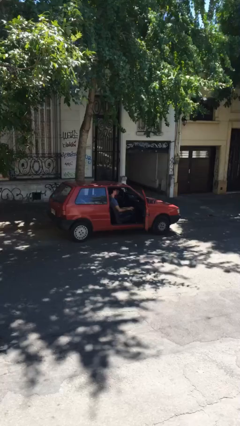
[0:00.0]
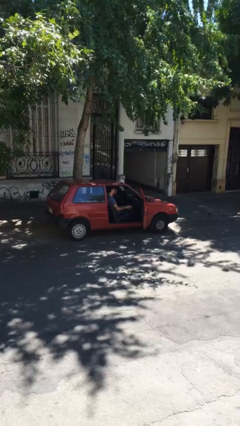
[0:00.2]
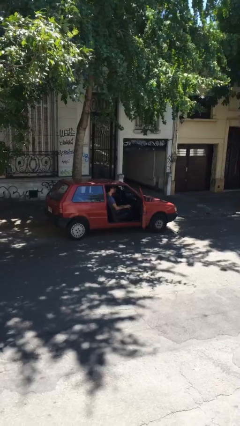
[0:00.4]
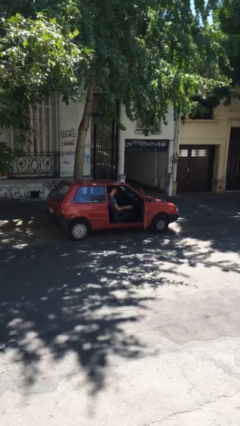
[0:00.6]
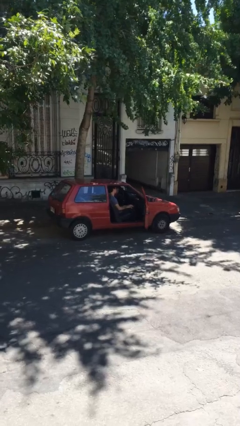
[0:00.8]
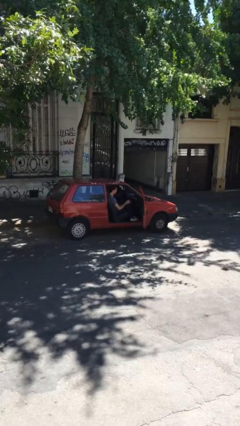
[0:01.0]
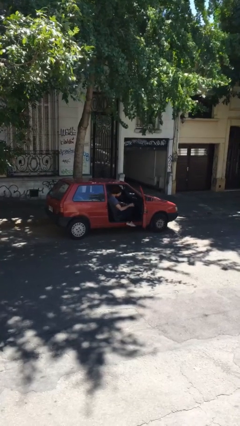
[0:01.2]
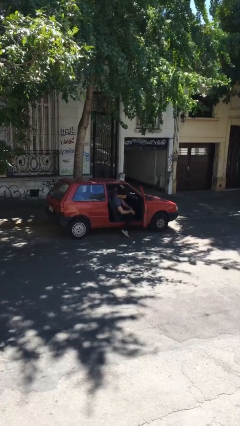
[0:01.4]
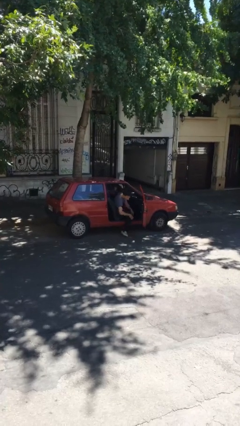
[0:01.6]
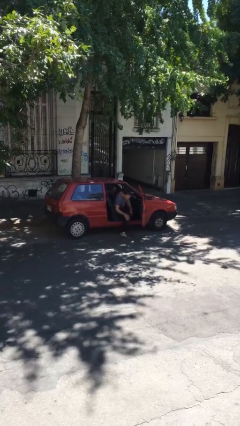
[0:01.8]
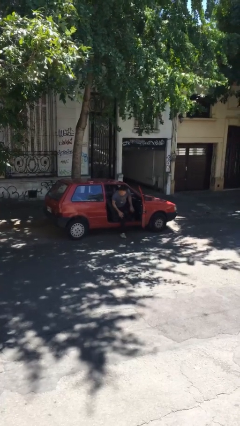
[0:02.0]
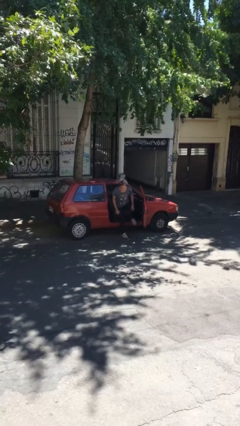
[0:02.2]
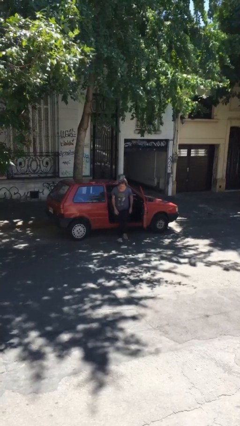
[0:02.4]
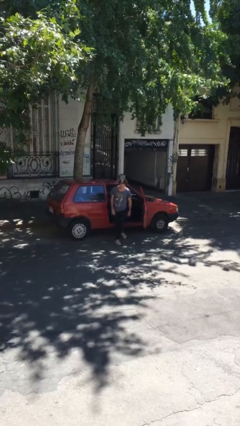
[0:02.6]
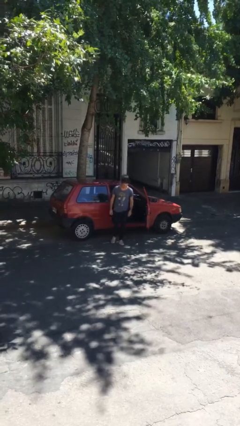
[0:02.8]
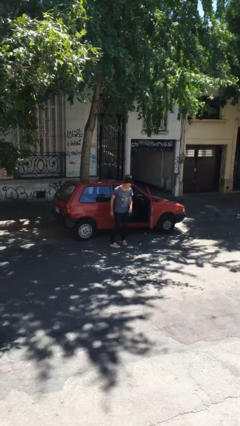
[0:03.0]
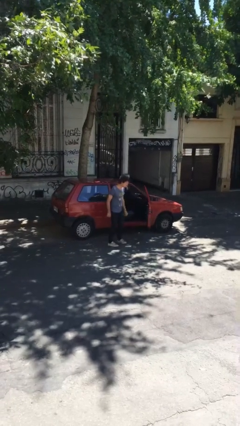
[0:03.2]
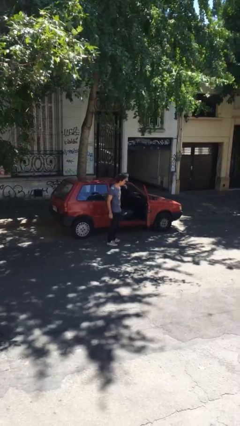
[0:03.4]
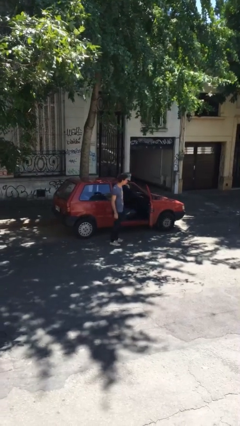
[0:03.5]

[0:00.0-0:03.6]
person exits car

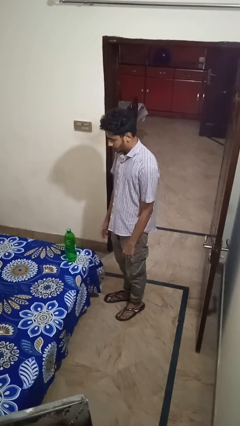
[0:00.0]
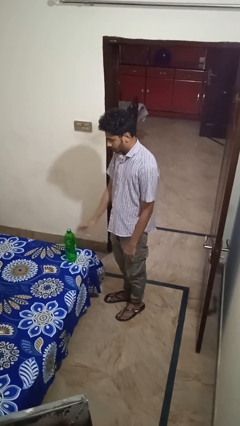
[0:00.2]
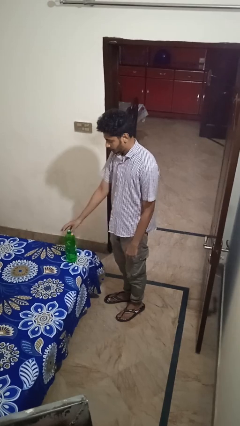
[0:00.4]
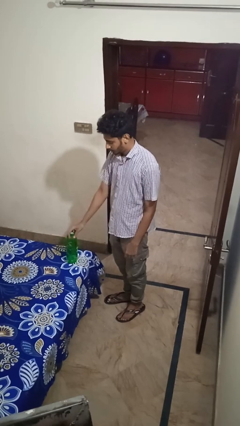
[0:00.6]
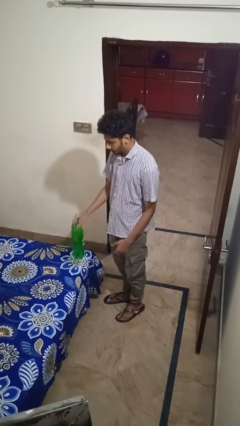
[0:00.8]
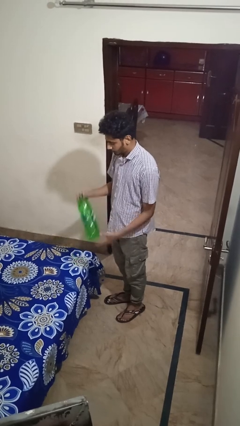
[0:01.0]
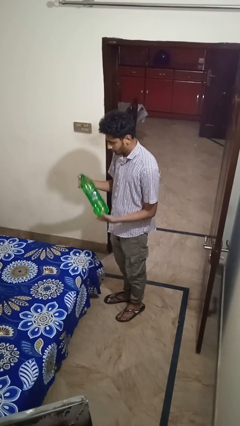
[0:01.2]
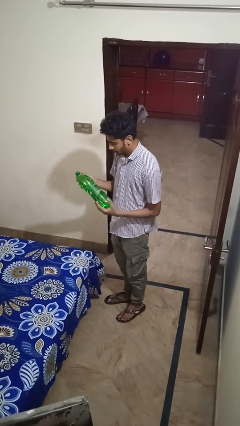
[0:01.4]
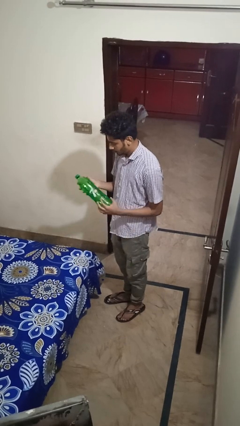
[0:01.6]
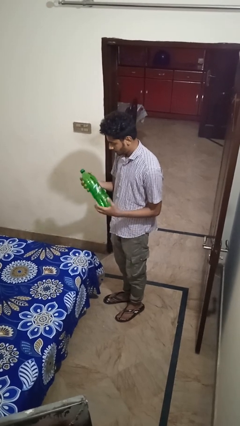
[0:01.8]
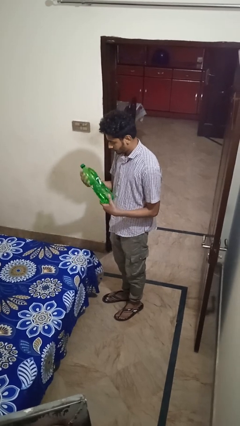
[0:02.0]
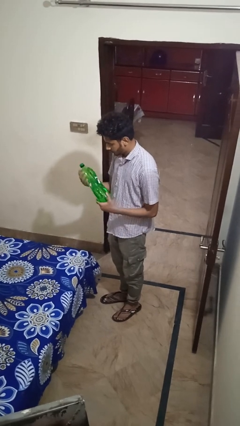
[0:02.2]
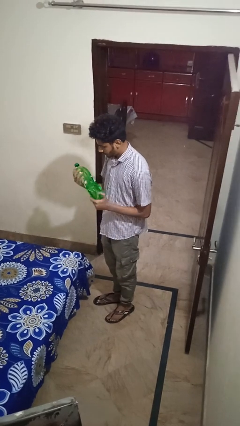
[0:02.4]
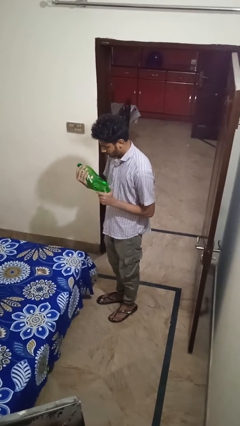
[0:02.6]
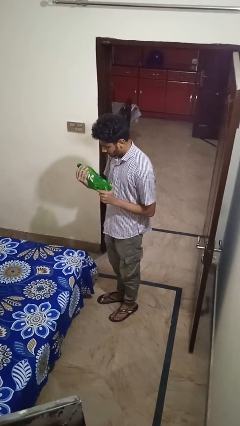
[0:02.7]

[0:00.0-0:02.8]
person picks up object from bed

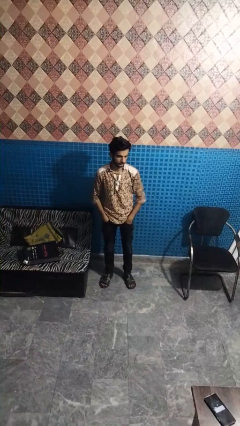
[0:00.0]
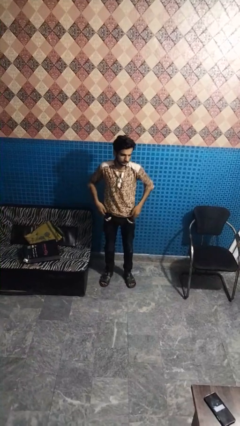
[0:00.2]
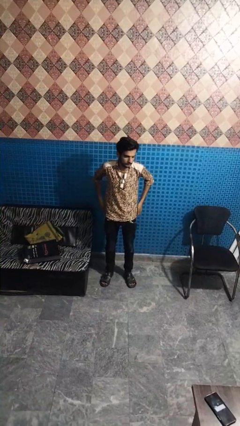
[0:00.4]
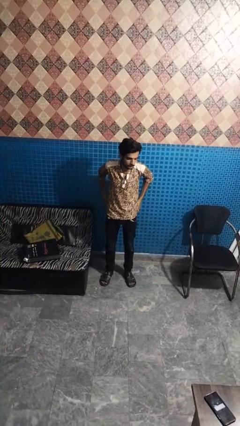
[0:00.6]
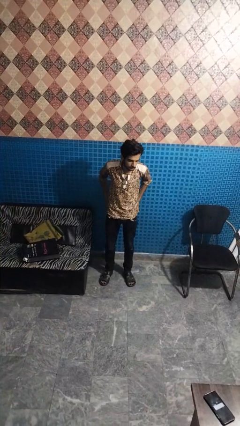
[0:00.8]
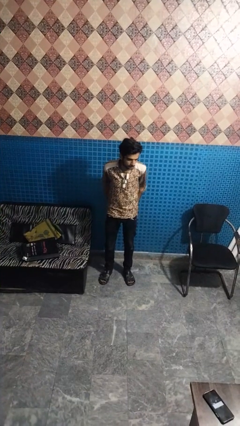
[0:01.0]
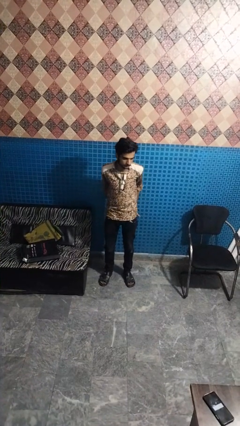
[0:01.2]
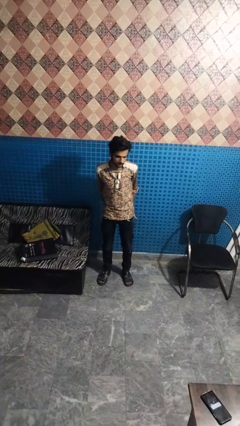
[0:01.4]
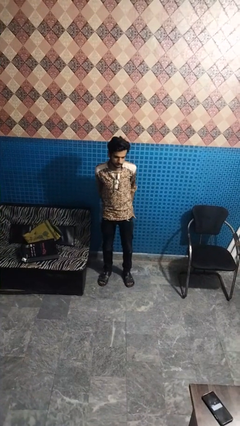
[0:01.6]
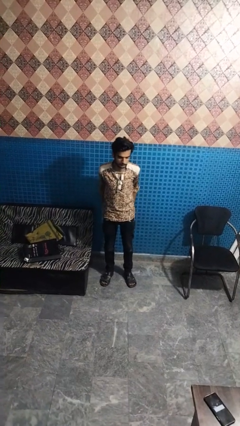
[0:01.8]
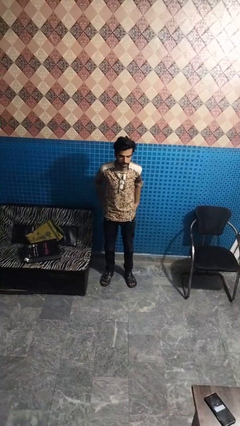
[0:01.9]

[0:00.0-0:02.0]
person puts hands in back pockets

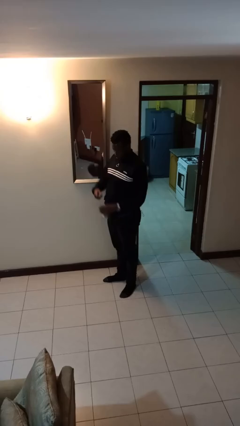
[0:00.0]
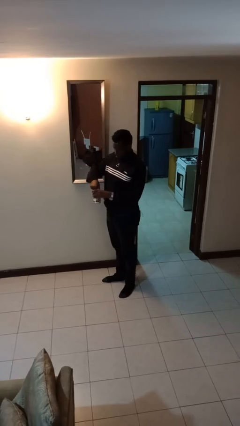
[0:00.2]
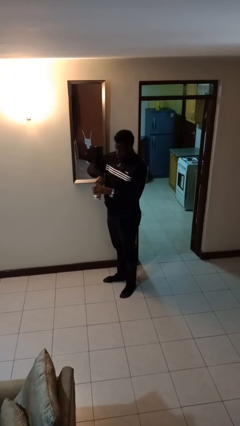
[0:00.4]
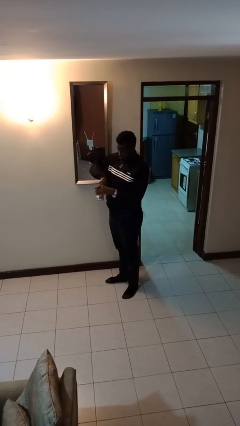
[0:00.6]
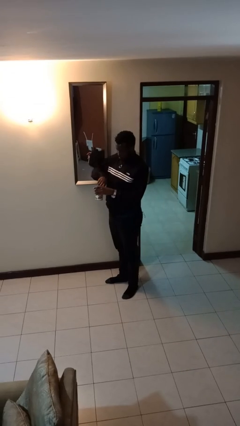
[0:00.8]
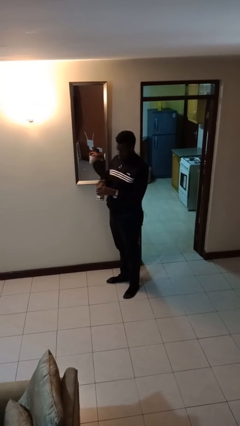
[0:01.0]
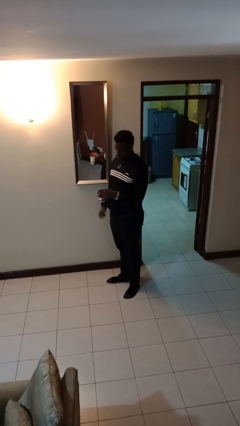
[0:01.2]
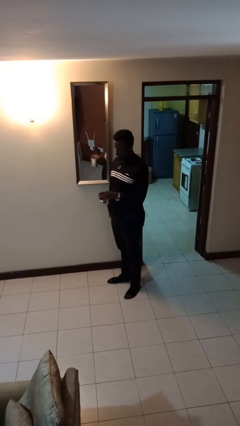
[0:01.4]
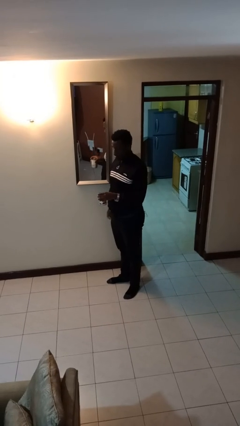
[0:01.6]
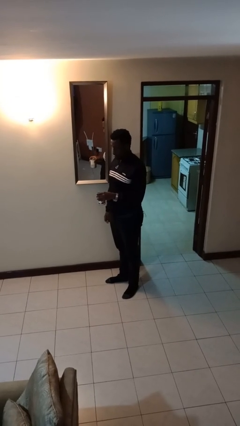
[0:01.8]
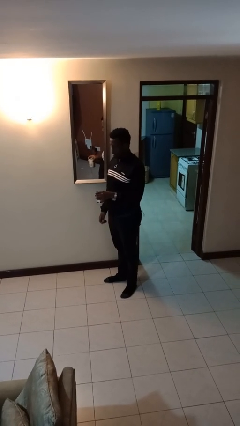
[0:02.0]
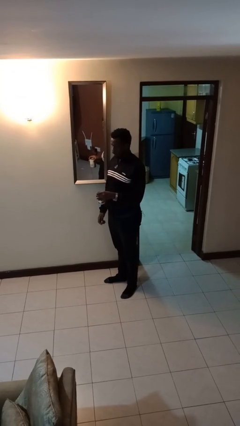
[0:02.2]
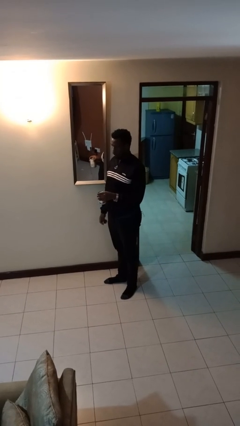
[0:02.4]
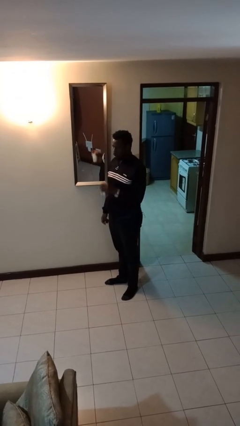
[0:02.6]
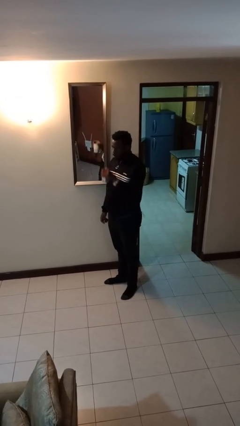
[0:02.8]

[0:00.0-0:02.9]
person opens beverage can

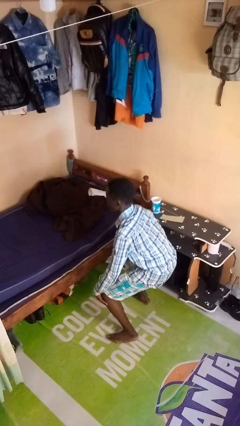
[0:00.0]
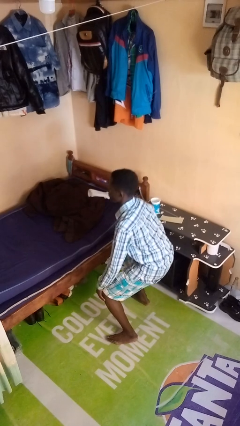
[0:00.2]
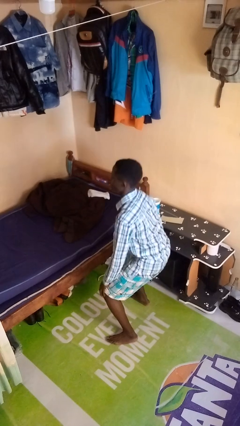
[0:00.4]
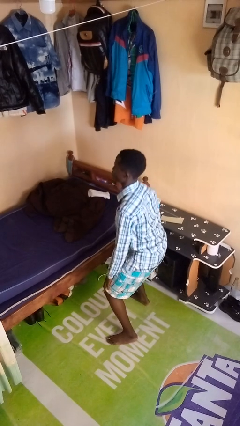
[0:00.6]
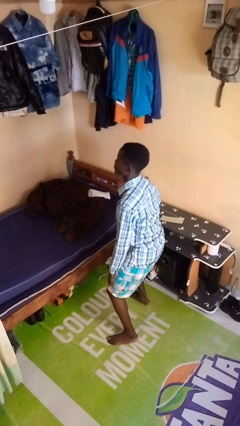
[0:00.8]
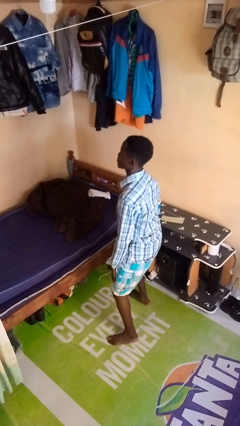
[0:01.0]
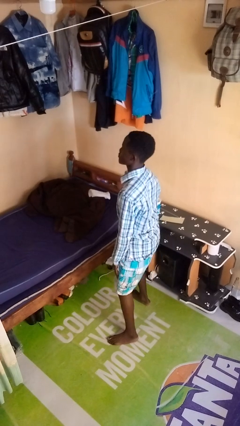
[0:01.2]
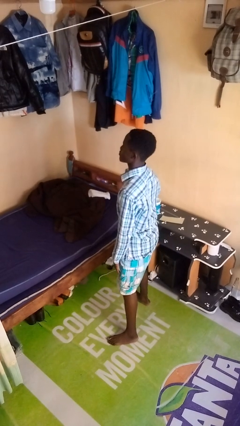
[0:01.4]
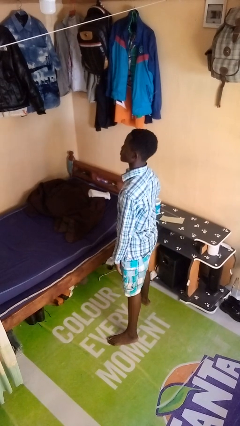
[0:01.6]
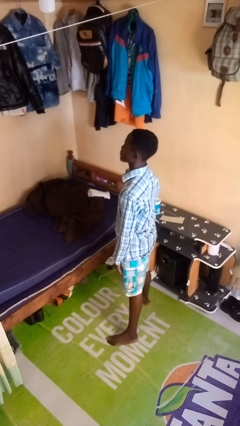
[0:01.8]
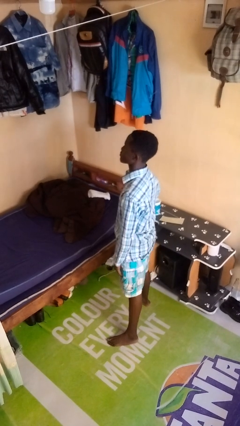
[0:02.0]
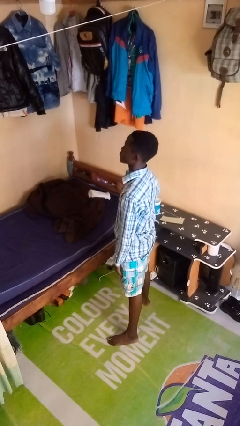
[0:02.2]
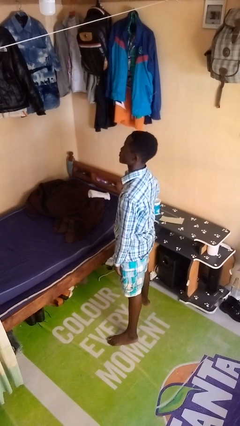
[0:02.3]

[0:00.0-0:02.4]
person stands up

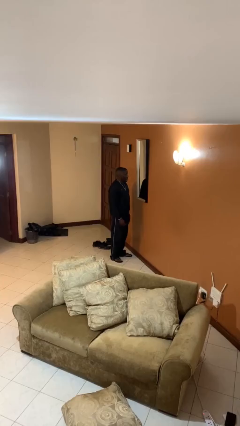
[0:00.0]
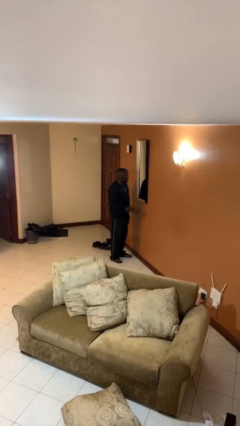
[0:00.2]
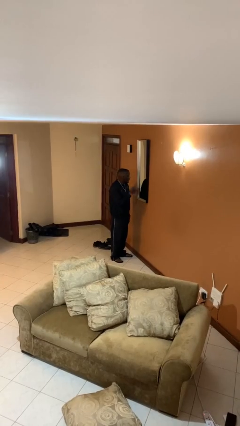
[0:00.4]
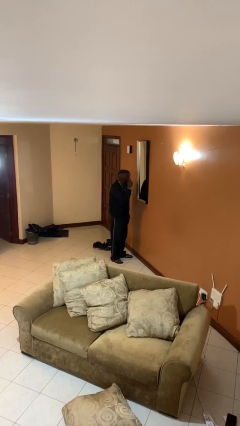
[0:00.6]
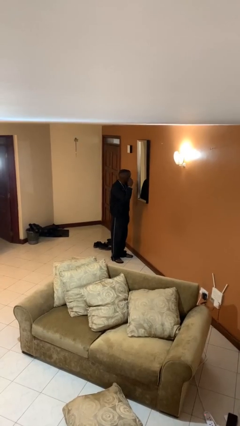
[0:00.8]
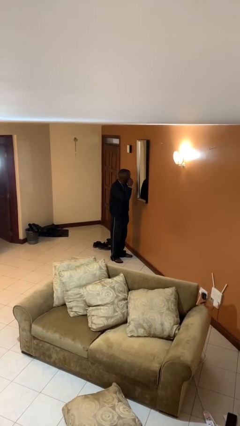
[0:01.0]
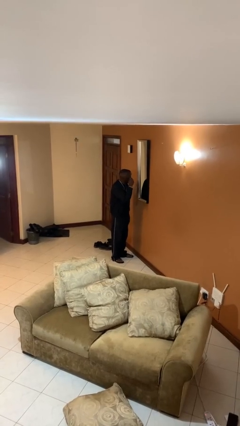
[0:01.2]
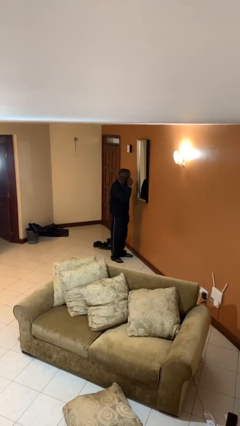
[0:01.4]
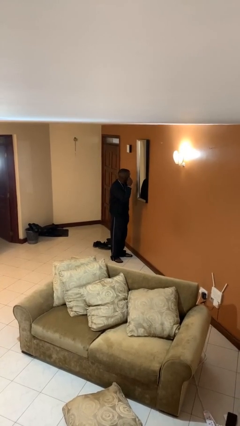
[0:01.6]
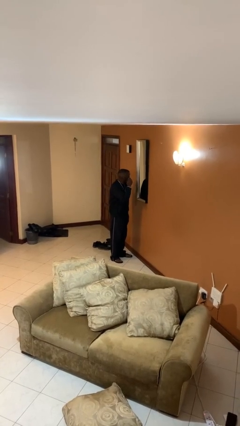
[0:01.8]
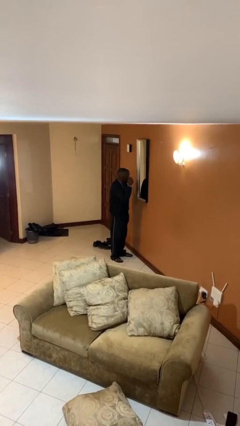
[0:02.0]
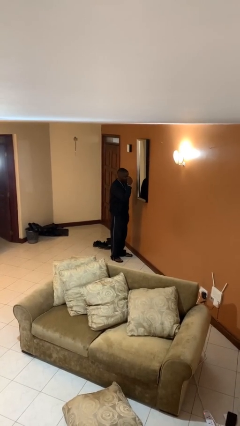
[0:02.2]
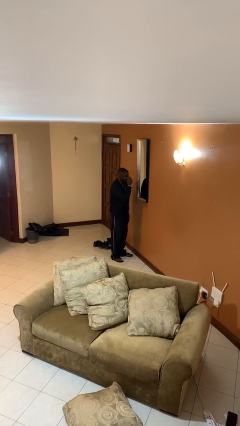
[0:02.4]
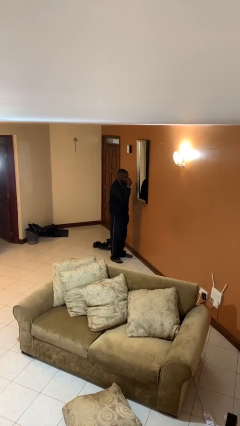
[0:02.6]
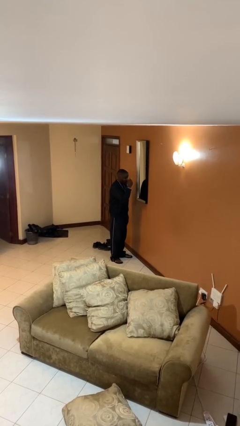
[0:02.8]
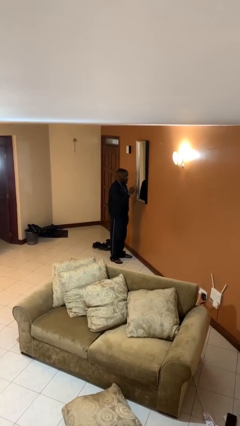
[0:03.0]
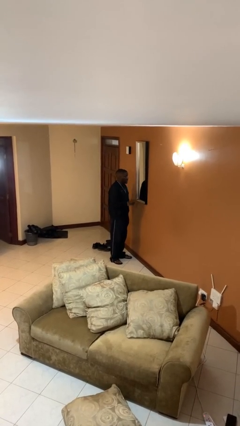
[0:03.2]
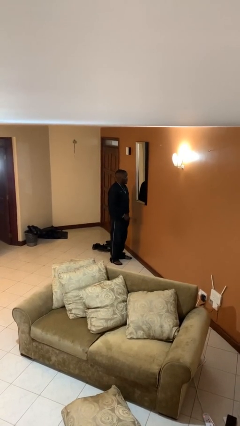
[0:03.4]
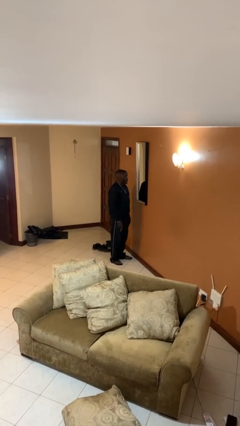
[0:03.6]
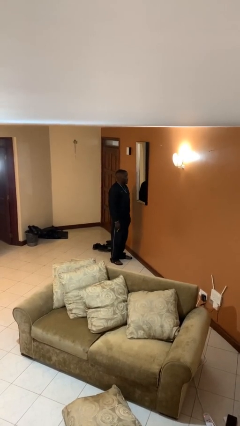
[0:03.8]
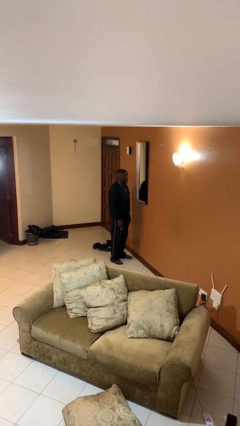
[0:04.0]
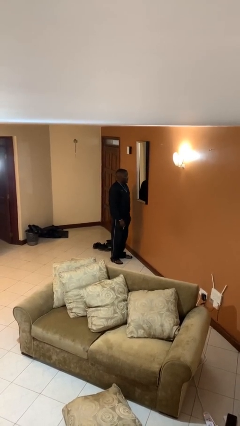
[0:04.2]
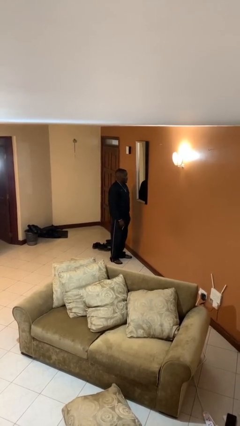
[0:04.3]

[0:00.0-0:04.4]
person applies eye makeup
